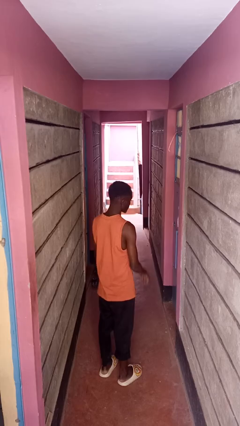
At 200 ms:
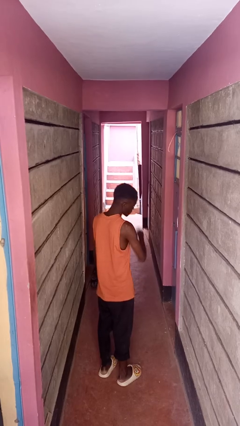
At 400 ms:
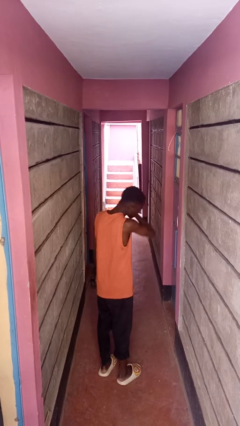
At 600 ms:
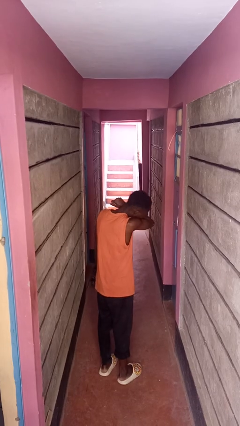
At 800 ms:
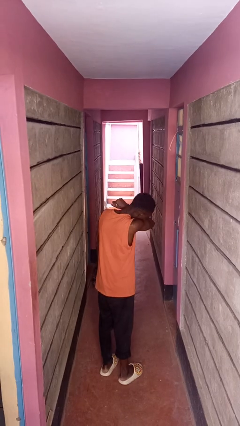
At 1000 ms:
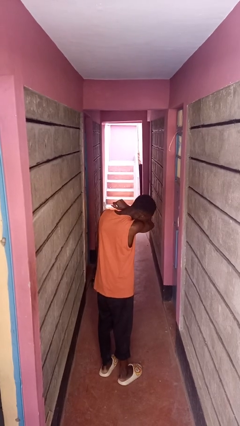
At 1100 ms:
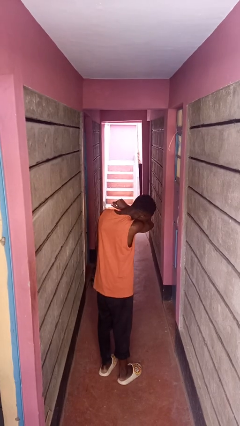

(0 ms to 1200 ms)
person sneezes into arm

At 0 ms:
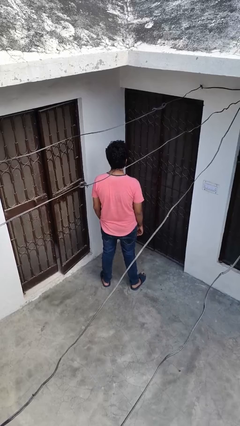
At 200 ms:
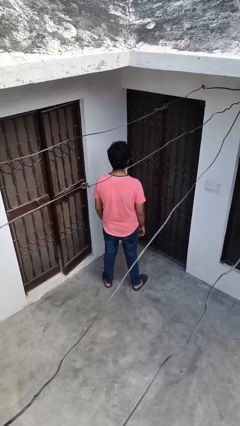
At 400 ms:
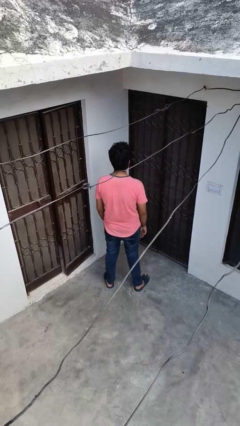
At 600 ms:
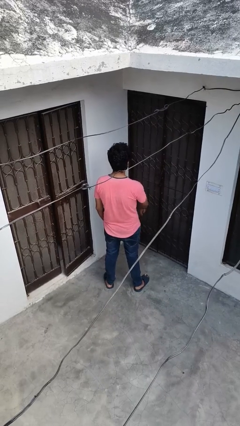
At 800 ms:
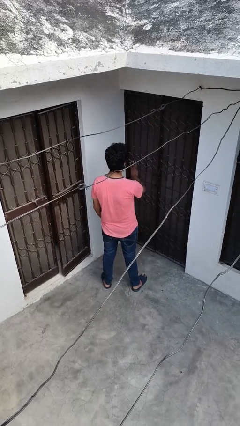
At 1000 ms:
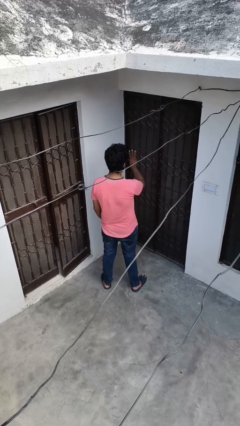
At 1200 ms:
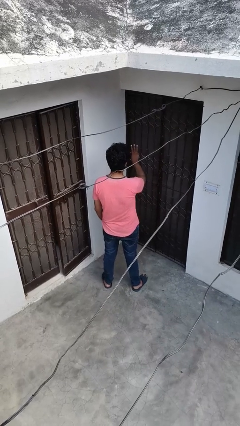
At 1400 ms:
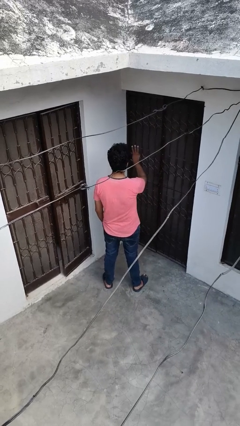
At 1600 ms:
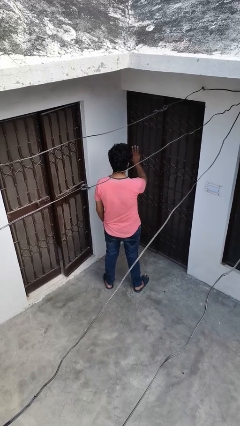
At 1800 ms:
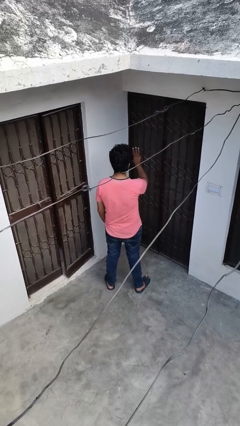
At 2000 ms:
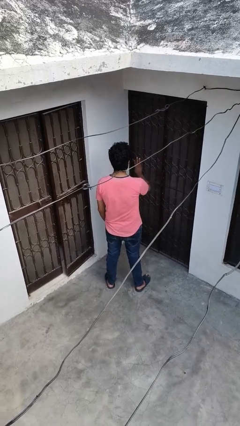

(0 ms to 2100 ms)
person gestures number three

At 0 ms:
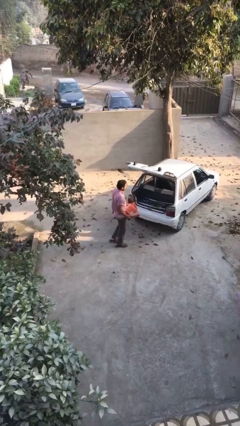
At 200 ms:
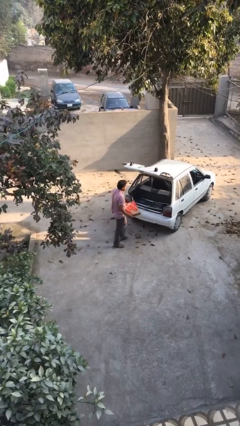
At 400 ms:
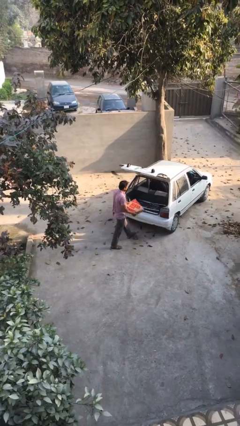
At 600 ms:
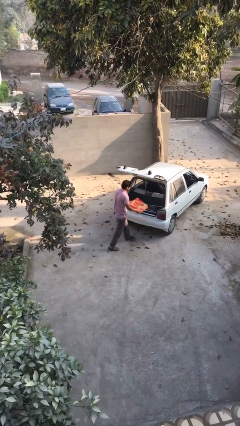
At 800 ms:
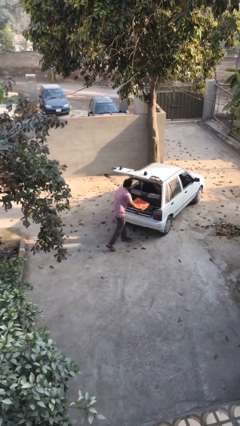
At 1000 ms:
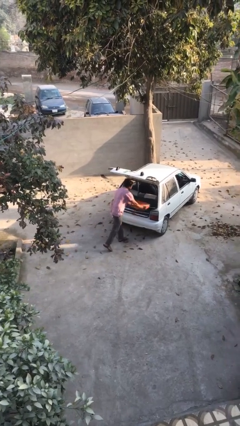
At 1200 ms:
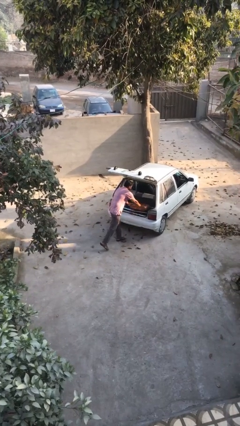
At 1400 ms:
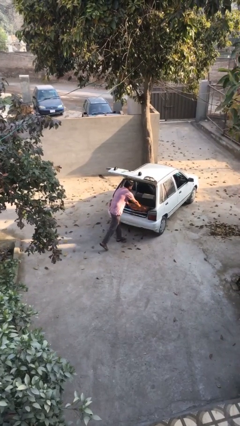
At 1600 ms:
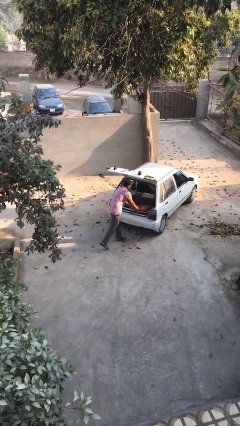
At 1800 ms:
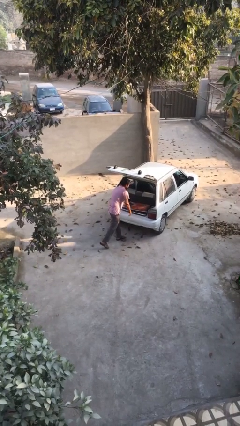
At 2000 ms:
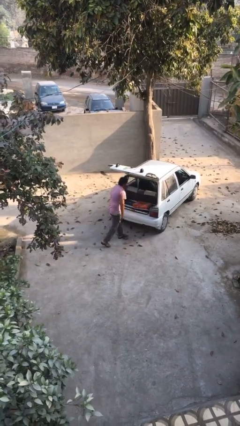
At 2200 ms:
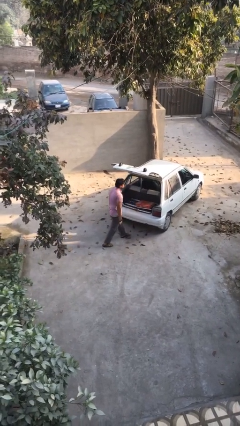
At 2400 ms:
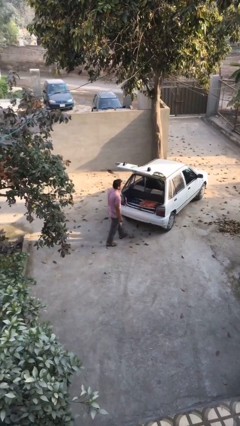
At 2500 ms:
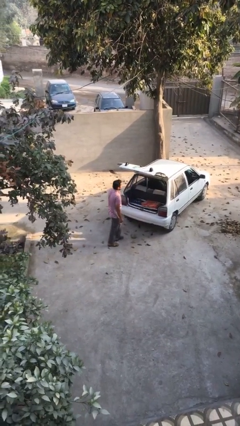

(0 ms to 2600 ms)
person loads car

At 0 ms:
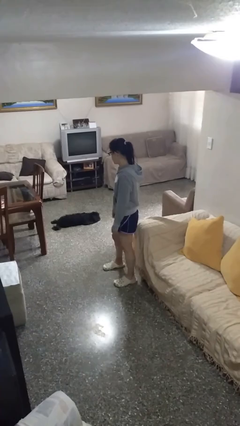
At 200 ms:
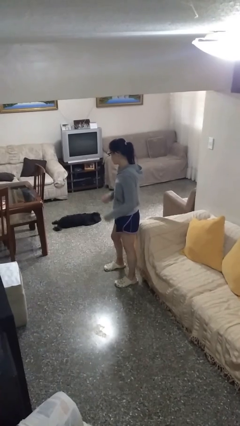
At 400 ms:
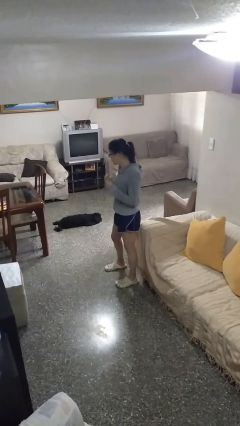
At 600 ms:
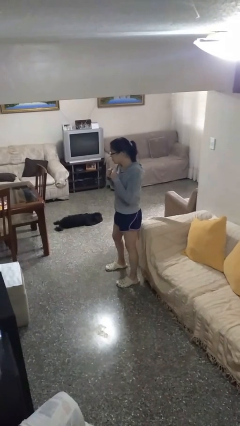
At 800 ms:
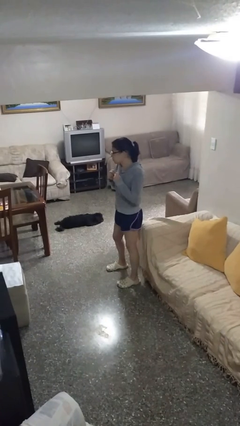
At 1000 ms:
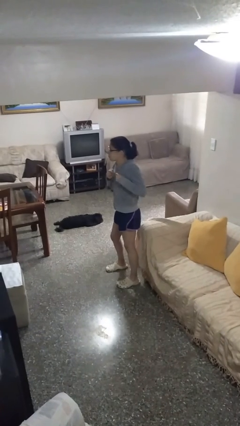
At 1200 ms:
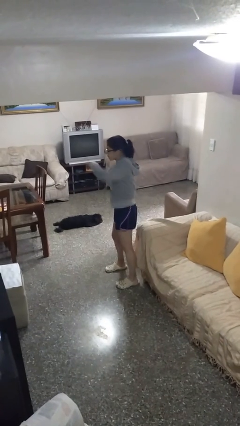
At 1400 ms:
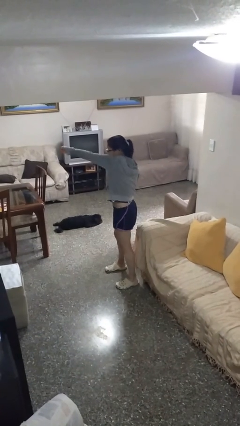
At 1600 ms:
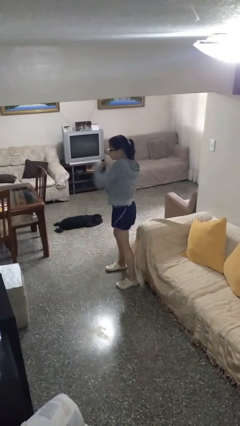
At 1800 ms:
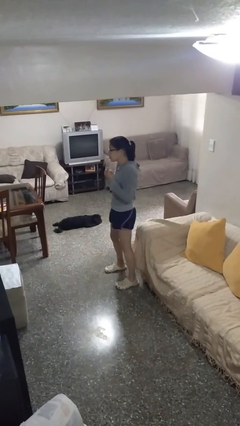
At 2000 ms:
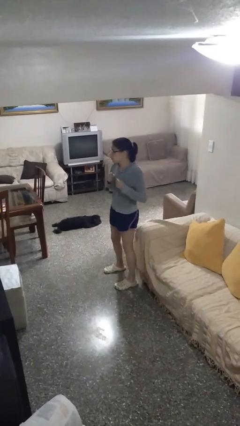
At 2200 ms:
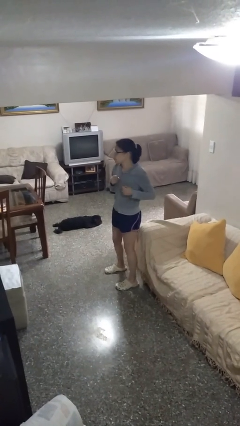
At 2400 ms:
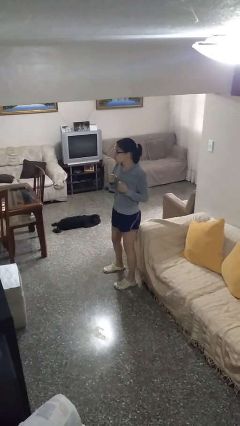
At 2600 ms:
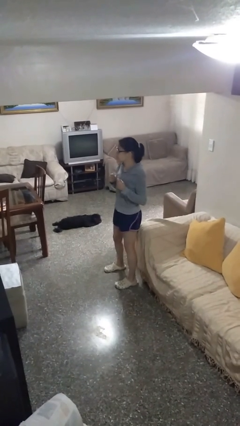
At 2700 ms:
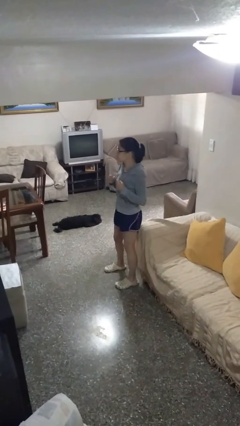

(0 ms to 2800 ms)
person punches

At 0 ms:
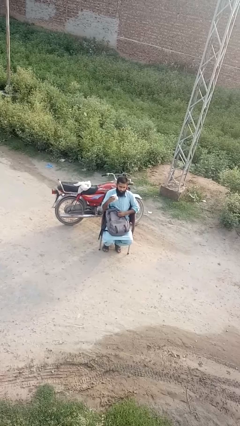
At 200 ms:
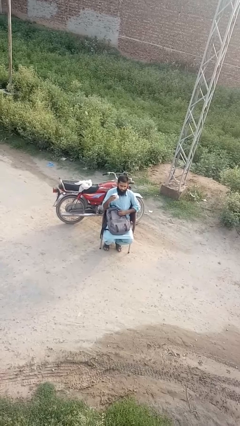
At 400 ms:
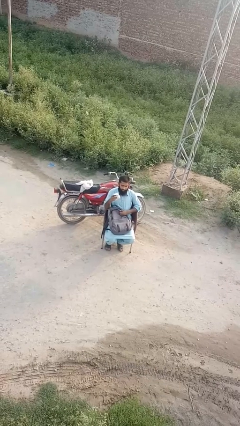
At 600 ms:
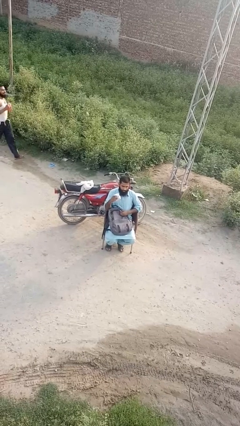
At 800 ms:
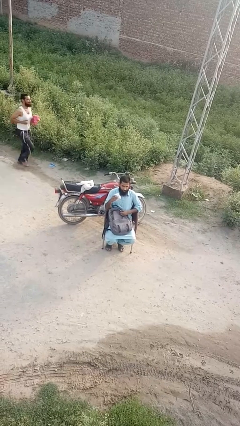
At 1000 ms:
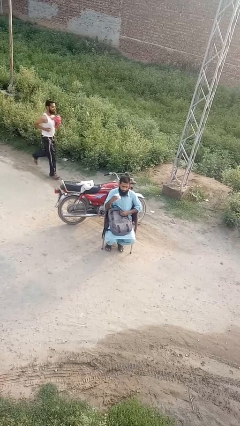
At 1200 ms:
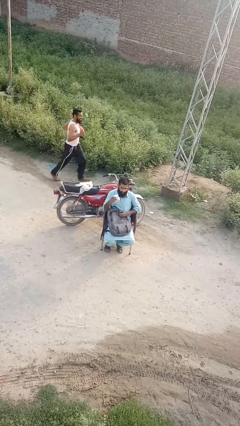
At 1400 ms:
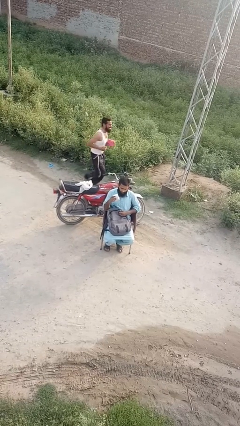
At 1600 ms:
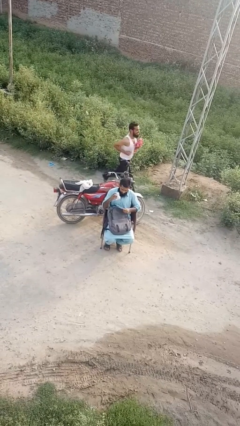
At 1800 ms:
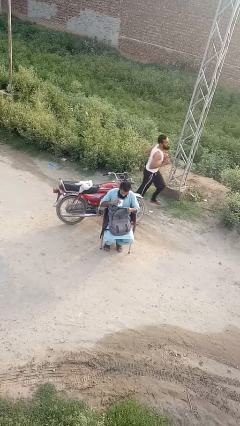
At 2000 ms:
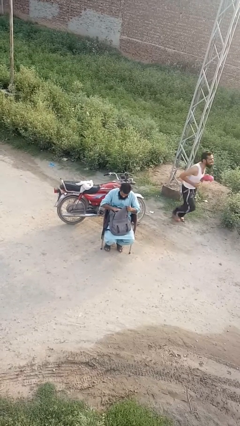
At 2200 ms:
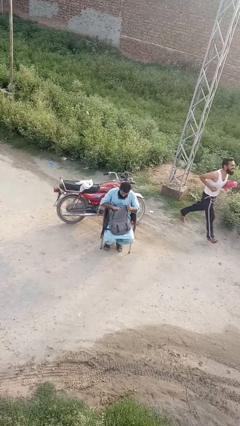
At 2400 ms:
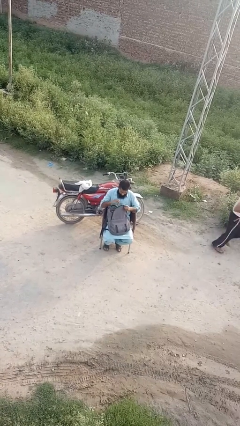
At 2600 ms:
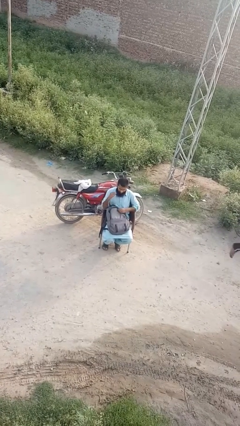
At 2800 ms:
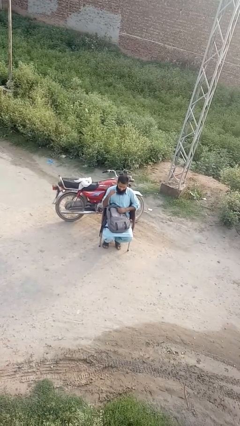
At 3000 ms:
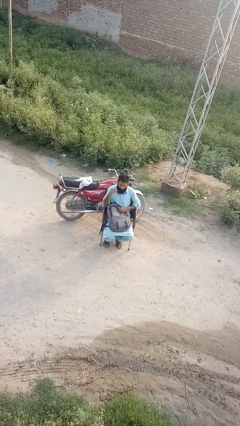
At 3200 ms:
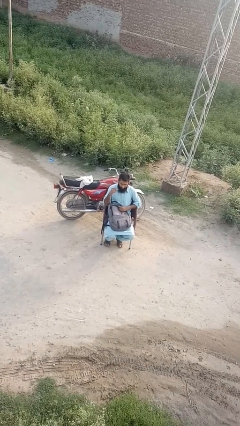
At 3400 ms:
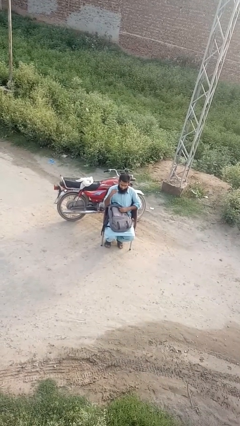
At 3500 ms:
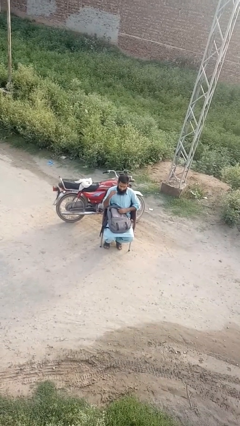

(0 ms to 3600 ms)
person puts object into backpack

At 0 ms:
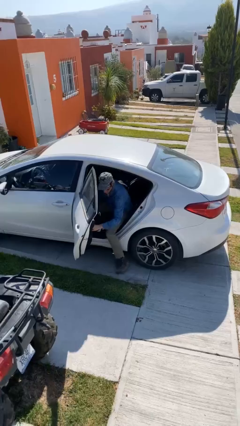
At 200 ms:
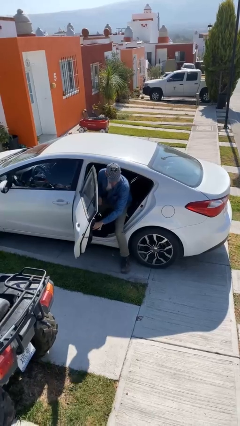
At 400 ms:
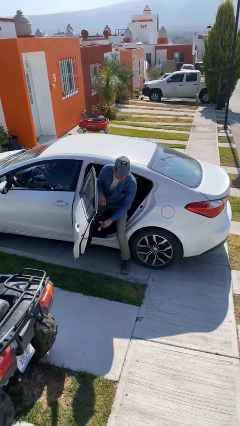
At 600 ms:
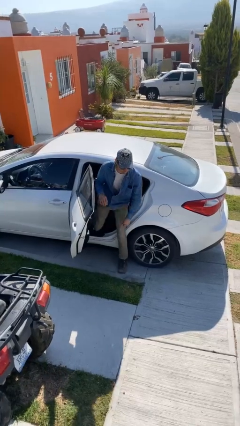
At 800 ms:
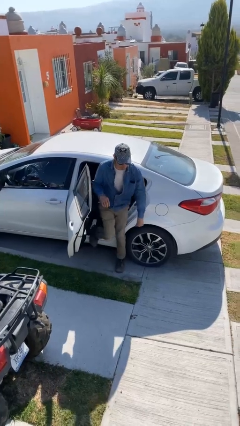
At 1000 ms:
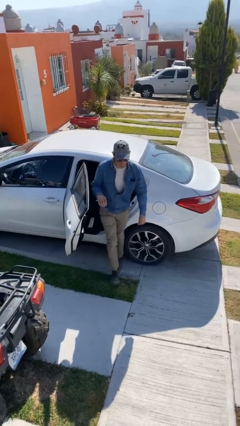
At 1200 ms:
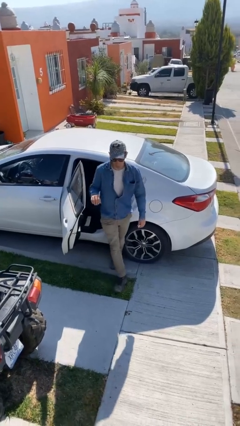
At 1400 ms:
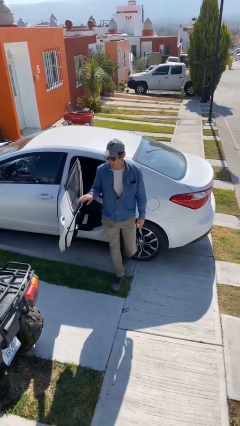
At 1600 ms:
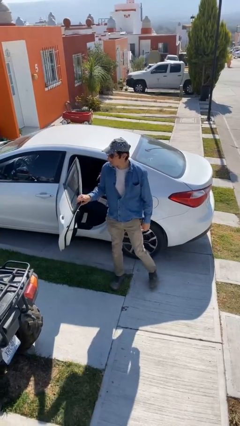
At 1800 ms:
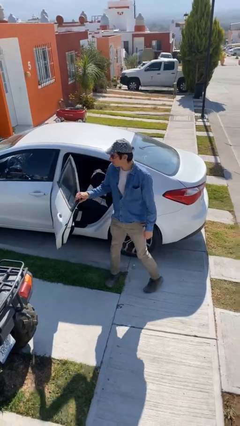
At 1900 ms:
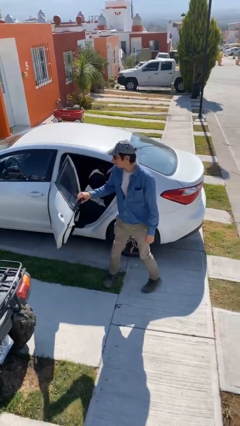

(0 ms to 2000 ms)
person exits car

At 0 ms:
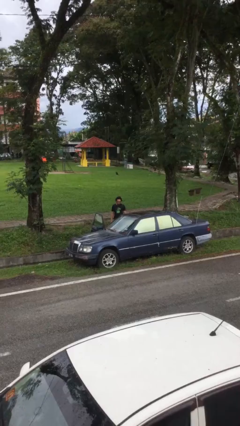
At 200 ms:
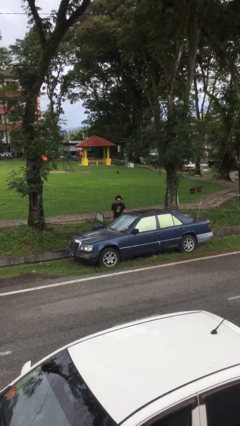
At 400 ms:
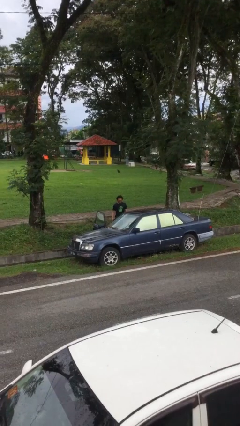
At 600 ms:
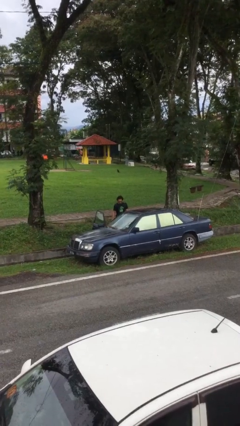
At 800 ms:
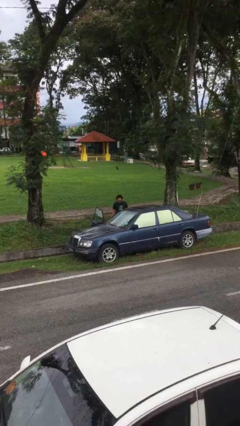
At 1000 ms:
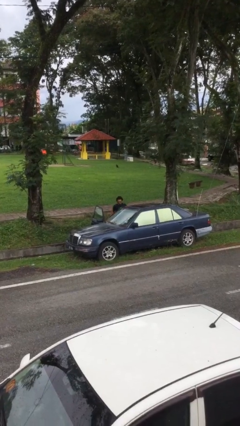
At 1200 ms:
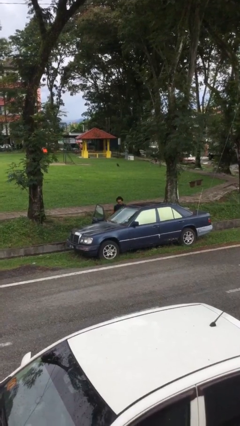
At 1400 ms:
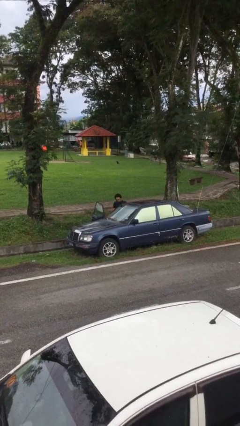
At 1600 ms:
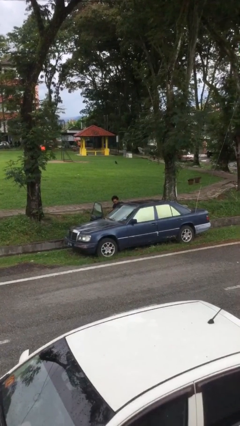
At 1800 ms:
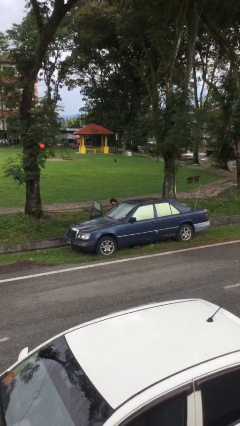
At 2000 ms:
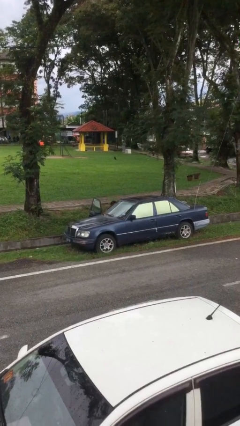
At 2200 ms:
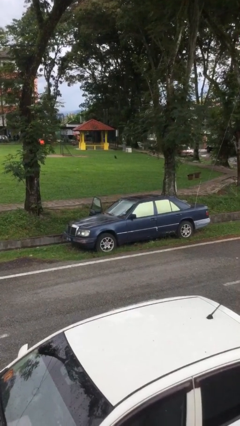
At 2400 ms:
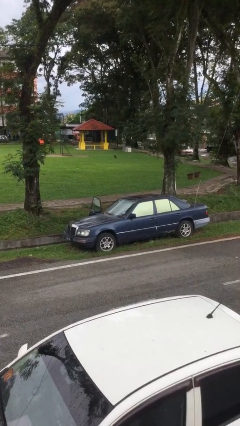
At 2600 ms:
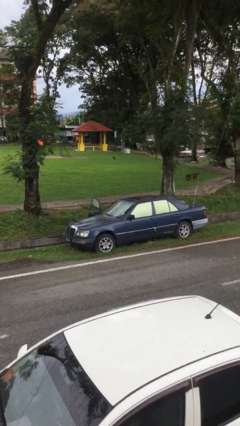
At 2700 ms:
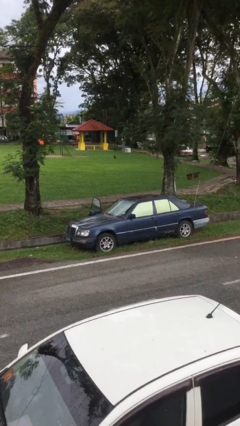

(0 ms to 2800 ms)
person enters car

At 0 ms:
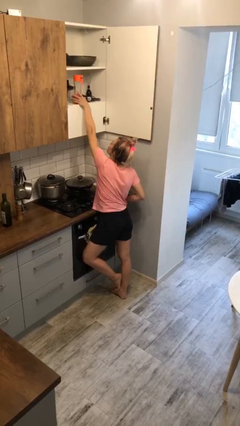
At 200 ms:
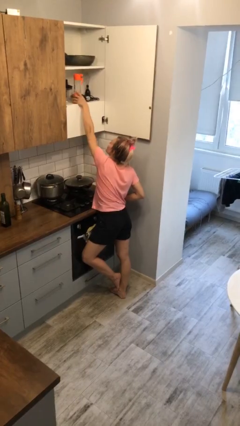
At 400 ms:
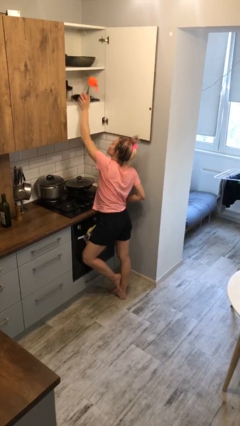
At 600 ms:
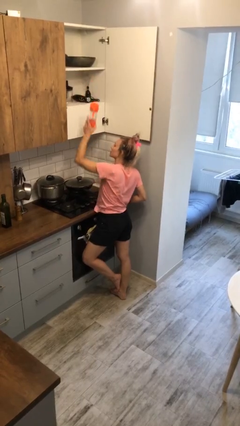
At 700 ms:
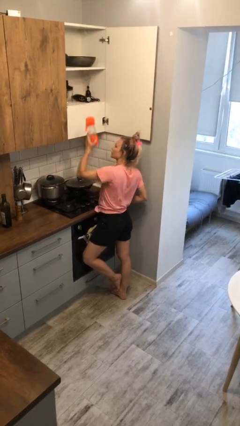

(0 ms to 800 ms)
person picks up object from cabinet
